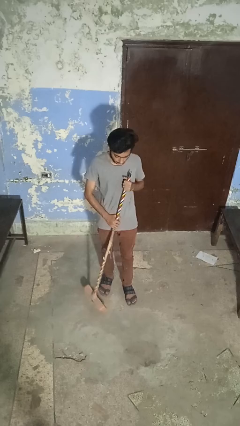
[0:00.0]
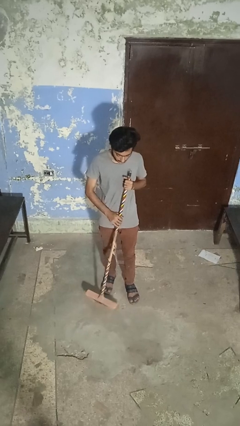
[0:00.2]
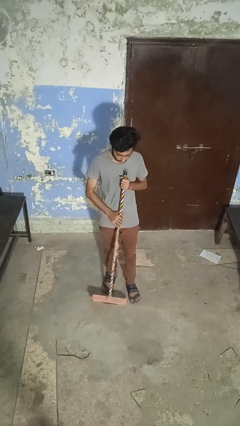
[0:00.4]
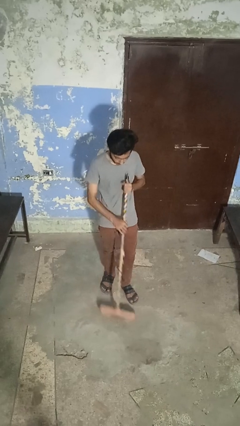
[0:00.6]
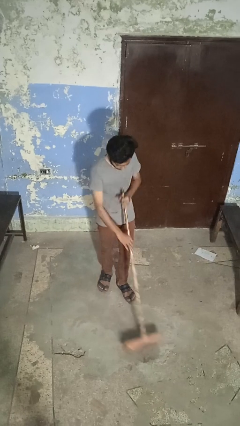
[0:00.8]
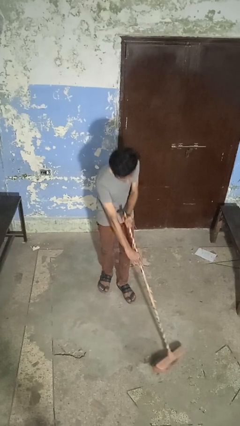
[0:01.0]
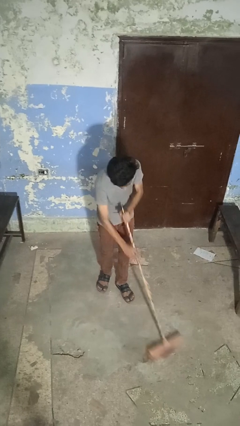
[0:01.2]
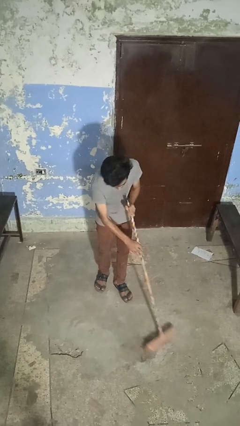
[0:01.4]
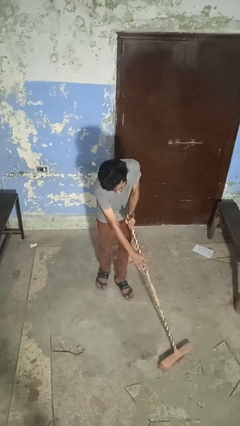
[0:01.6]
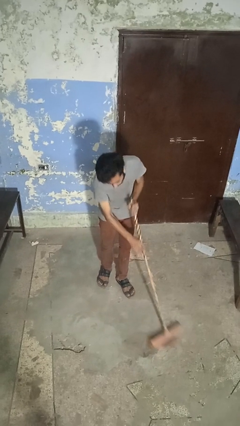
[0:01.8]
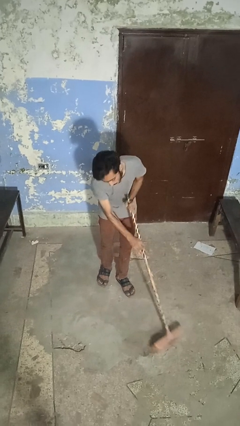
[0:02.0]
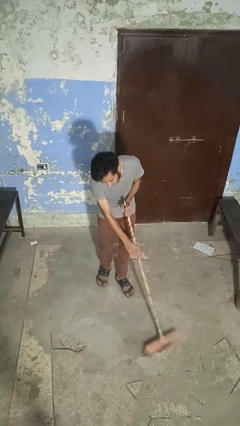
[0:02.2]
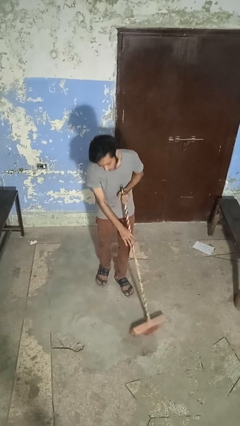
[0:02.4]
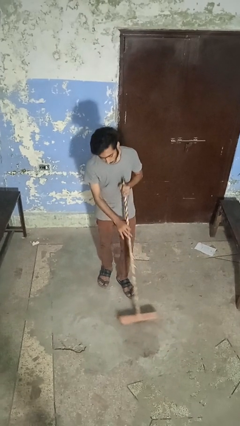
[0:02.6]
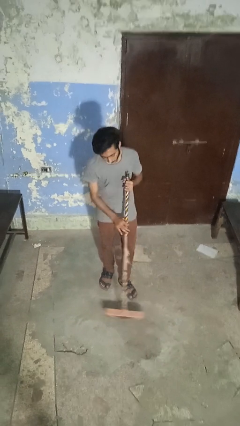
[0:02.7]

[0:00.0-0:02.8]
person sweeps floor

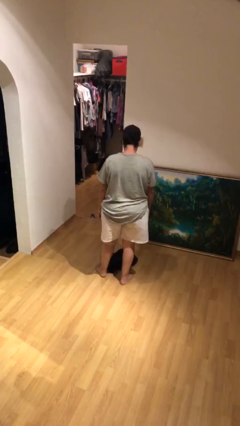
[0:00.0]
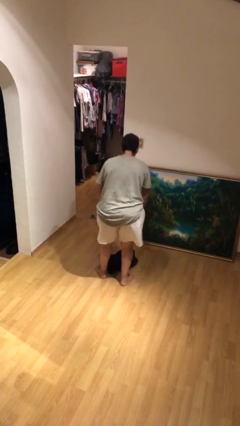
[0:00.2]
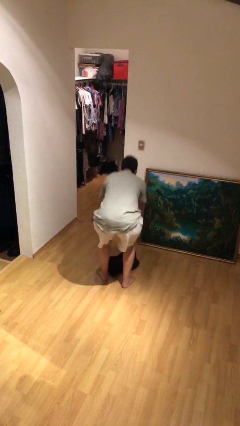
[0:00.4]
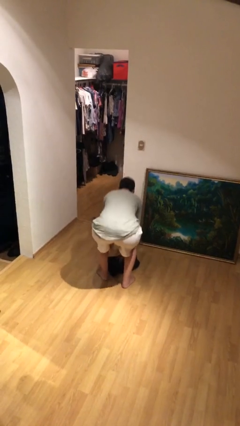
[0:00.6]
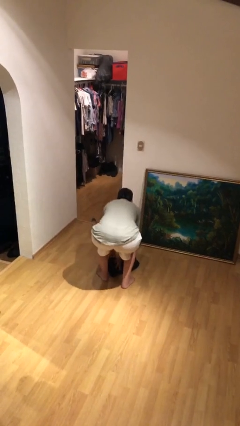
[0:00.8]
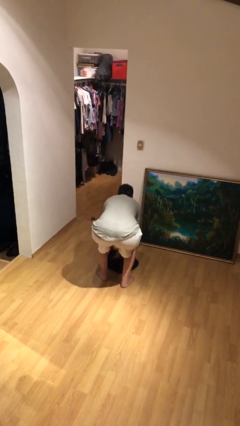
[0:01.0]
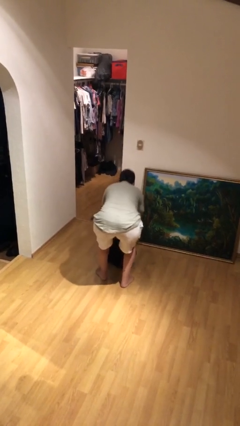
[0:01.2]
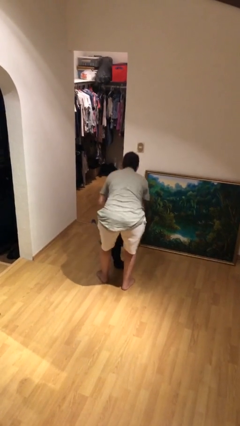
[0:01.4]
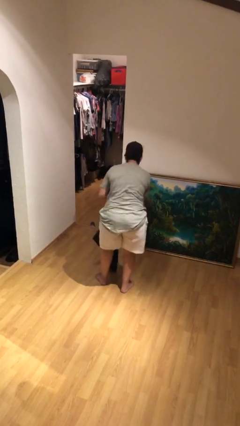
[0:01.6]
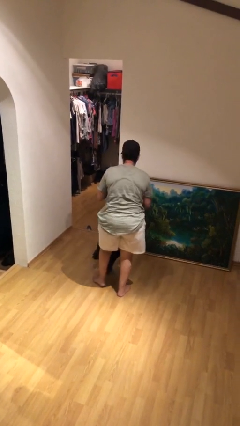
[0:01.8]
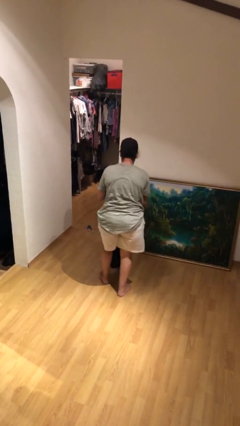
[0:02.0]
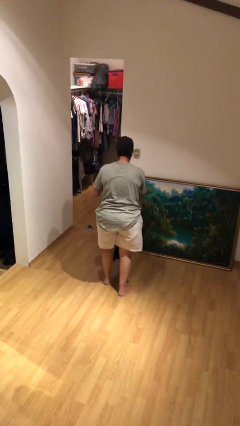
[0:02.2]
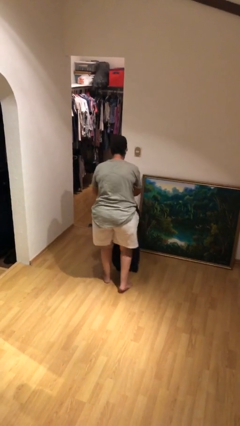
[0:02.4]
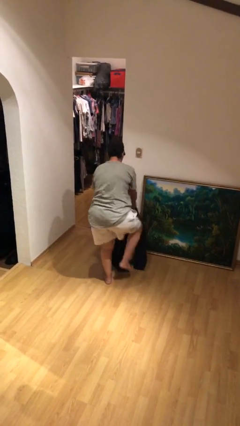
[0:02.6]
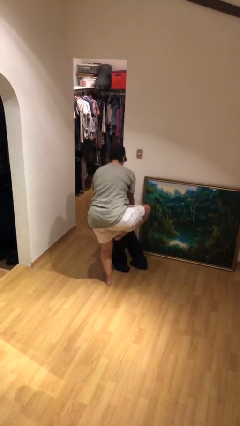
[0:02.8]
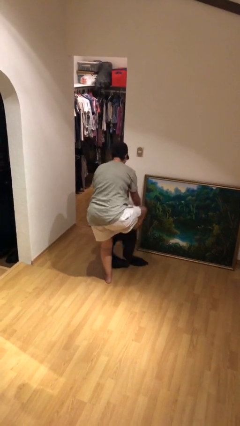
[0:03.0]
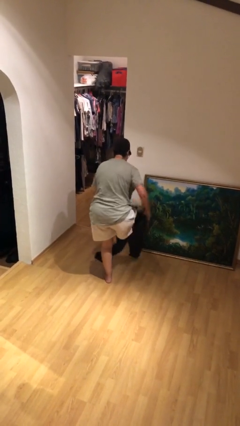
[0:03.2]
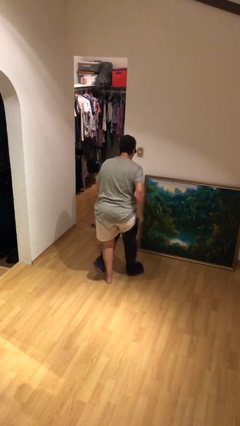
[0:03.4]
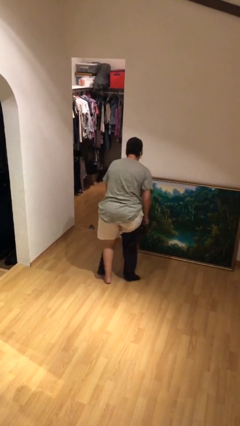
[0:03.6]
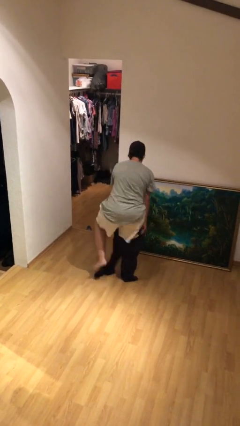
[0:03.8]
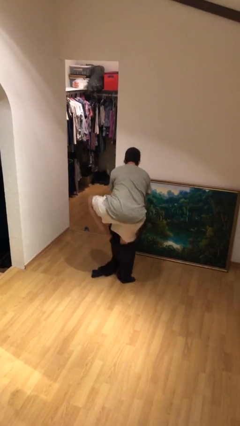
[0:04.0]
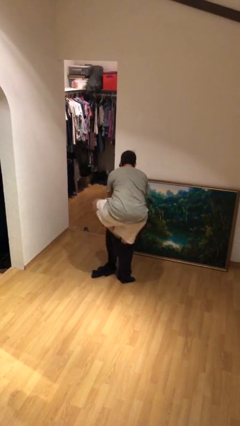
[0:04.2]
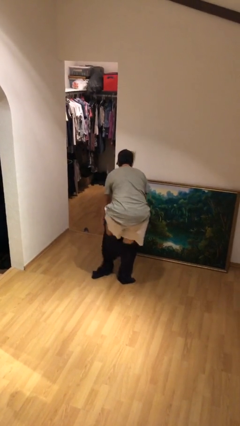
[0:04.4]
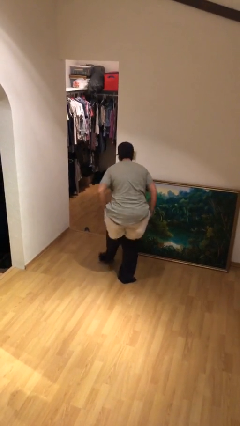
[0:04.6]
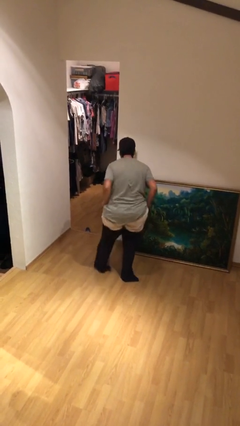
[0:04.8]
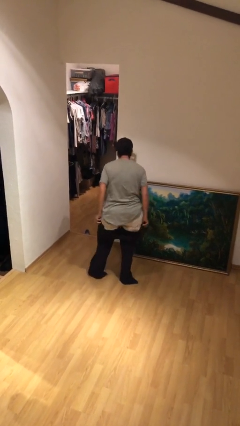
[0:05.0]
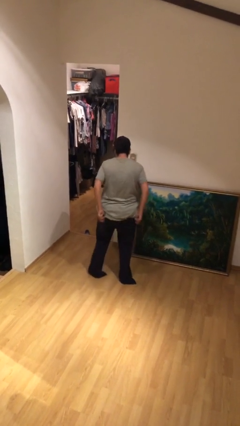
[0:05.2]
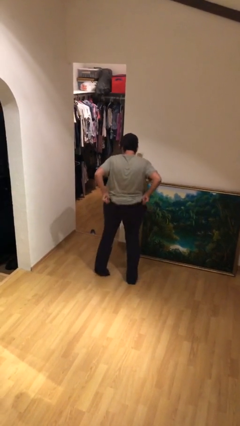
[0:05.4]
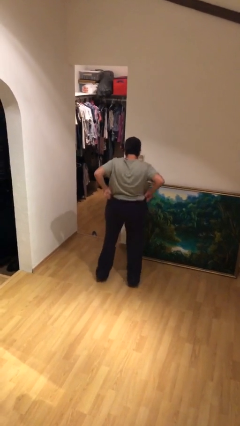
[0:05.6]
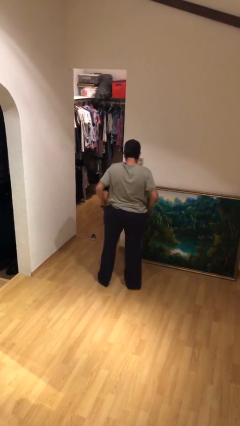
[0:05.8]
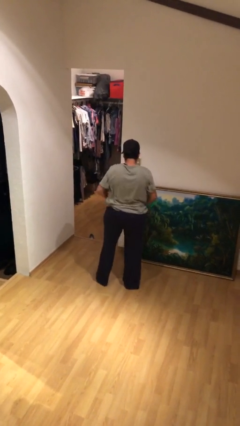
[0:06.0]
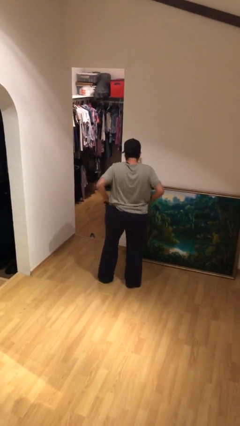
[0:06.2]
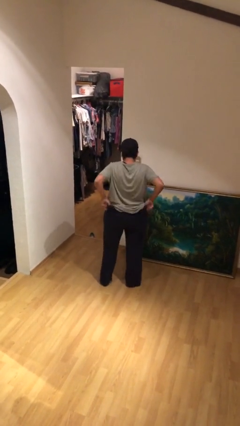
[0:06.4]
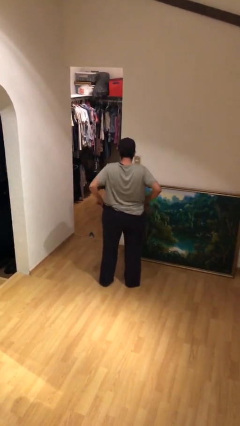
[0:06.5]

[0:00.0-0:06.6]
person puts on pants

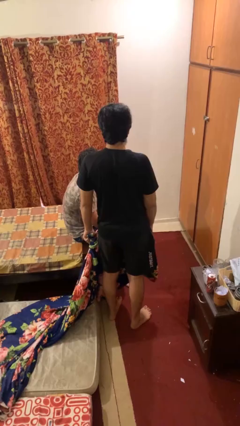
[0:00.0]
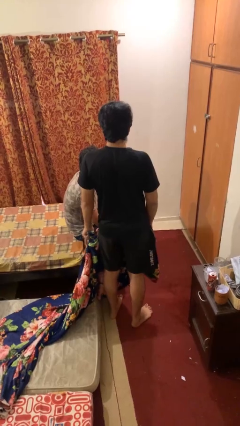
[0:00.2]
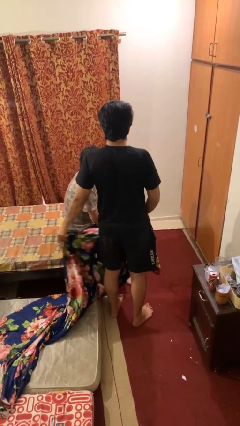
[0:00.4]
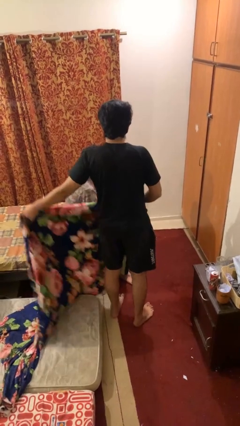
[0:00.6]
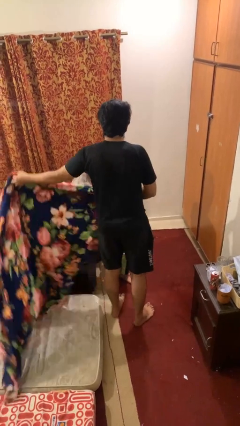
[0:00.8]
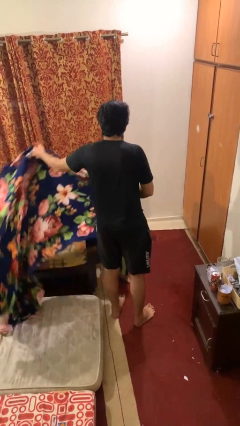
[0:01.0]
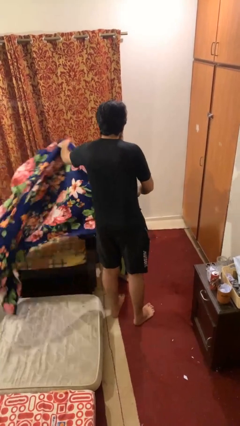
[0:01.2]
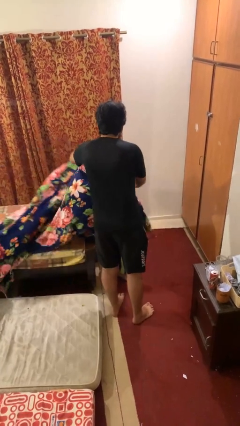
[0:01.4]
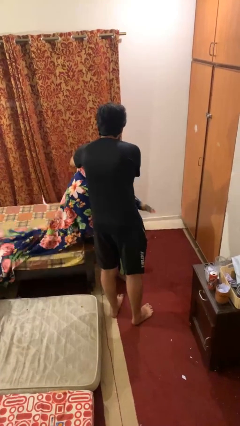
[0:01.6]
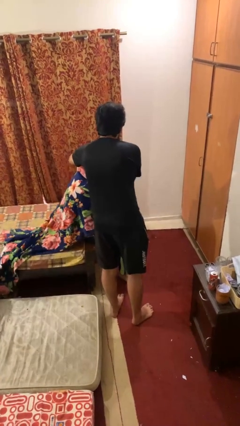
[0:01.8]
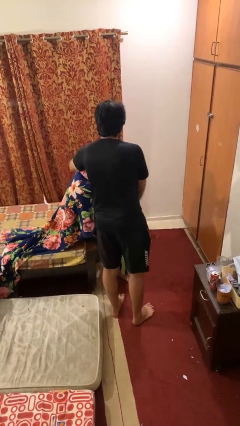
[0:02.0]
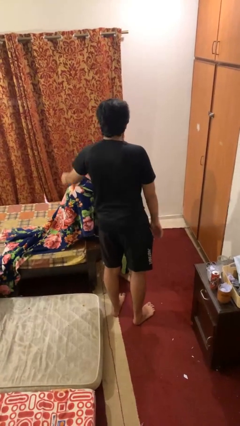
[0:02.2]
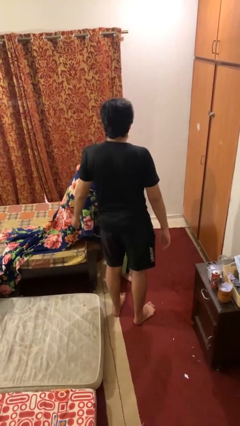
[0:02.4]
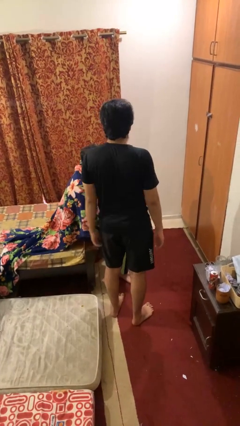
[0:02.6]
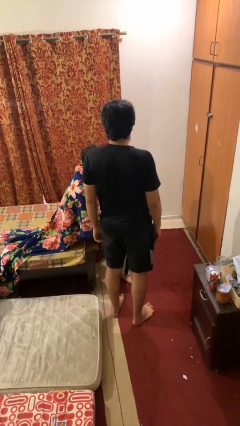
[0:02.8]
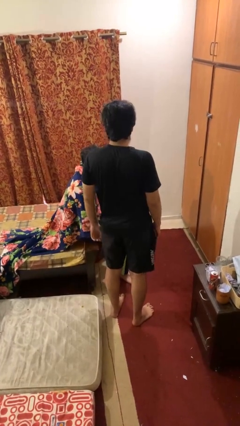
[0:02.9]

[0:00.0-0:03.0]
person covers friend with blanket

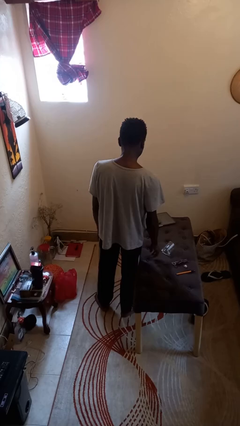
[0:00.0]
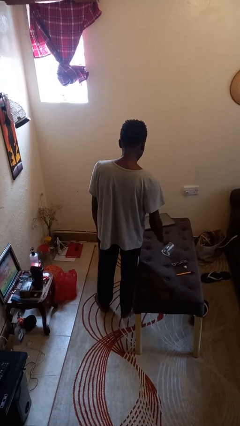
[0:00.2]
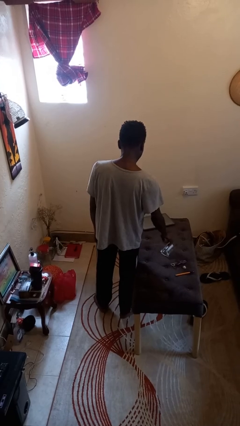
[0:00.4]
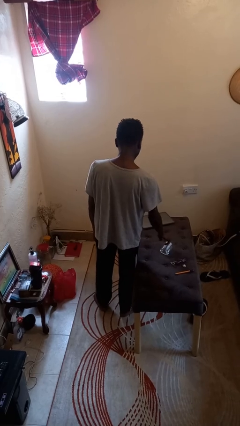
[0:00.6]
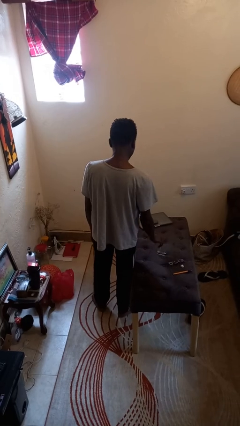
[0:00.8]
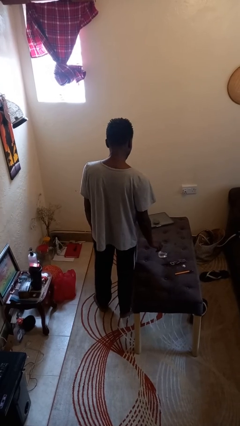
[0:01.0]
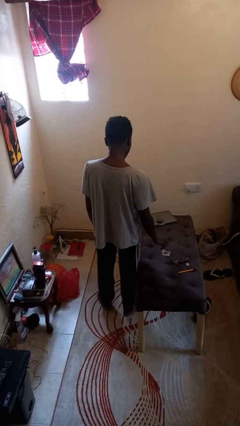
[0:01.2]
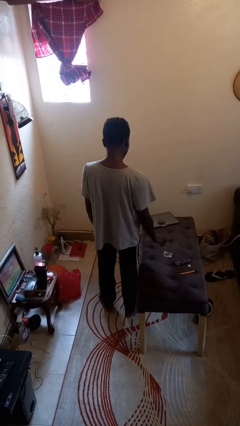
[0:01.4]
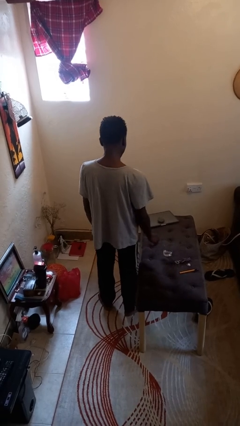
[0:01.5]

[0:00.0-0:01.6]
person sets upright glass

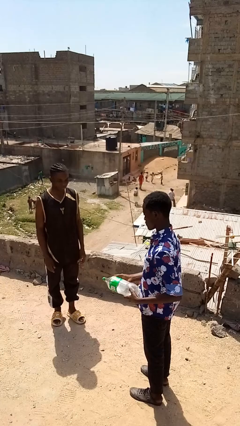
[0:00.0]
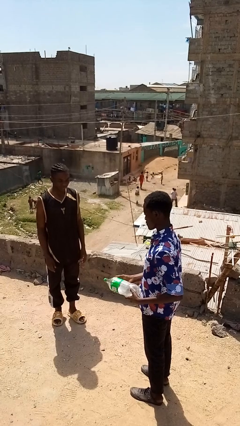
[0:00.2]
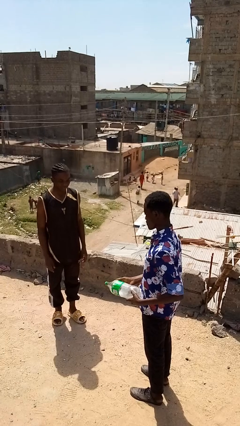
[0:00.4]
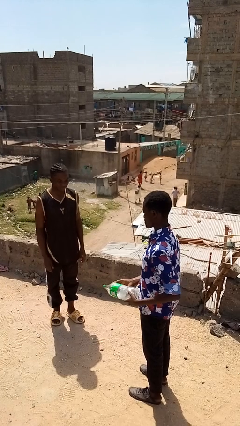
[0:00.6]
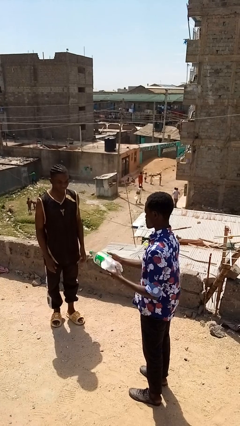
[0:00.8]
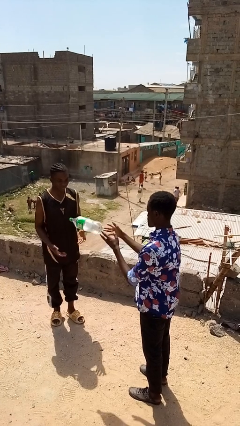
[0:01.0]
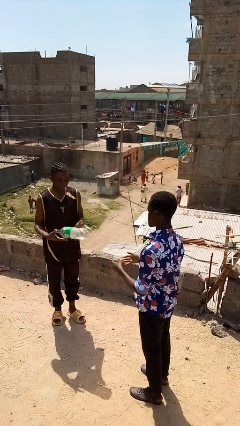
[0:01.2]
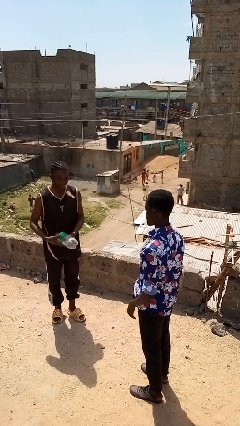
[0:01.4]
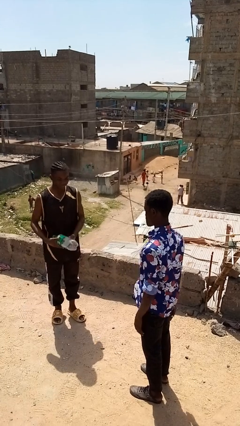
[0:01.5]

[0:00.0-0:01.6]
person throws object to person

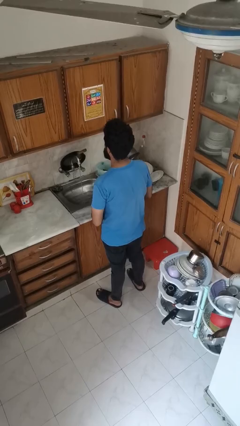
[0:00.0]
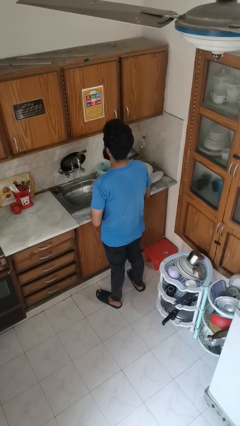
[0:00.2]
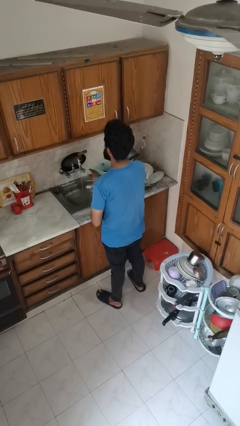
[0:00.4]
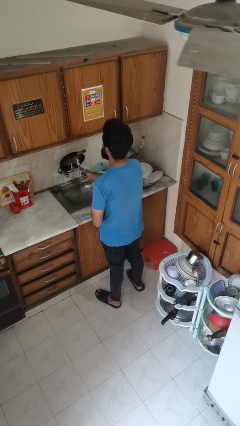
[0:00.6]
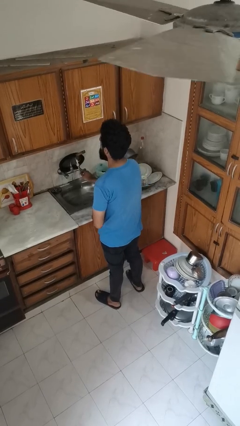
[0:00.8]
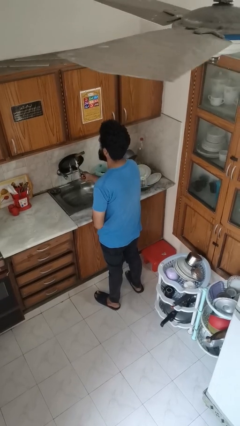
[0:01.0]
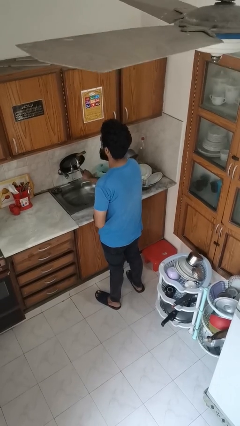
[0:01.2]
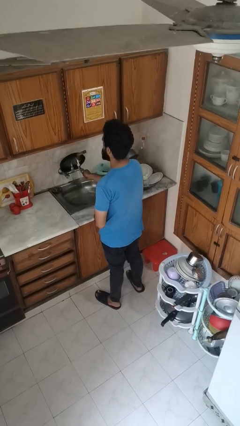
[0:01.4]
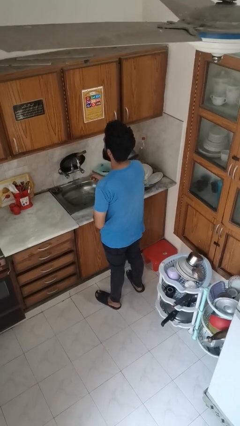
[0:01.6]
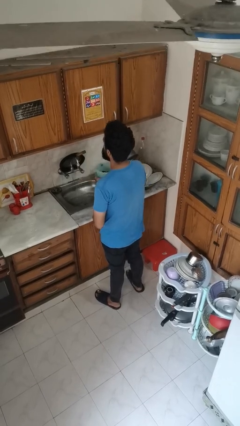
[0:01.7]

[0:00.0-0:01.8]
person turns off faucet

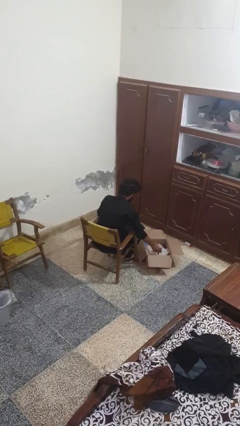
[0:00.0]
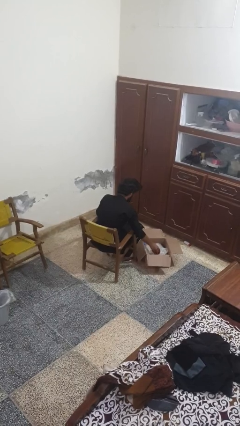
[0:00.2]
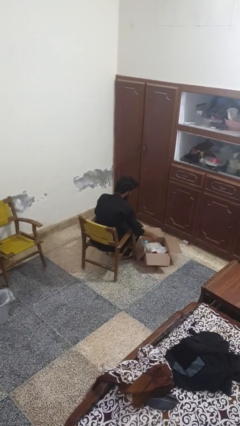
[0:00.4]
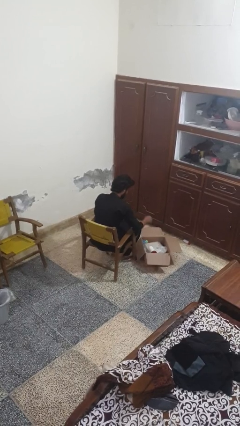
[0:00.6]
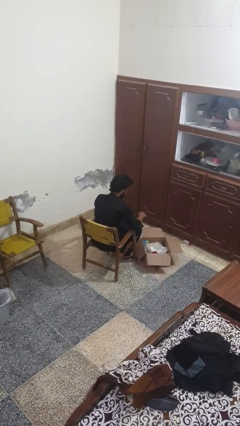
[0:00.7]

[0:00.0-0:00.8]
person puts object into box
